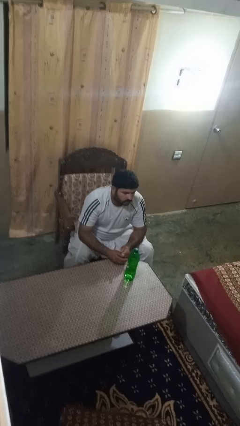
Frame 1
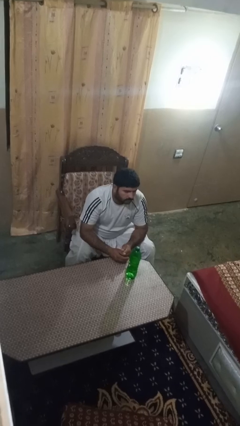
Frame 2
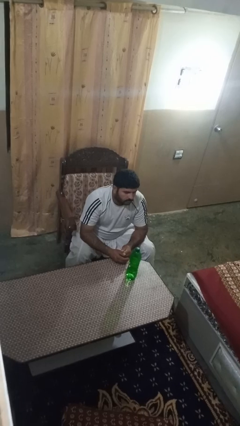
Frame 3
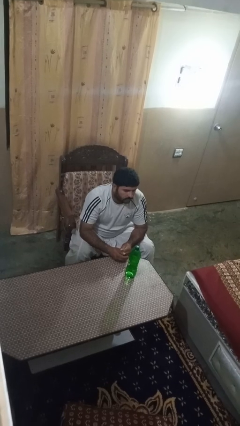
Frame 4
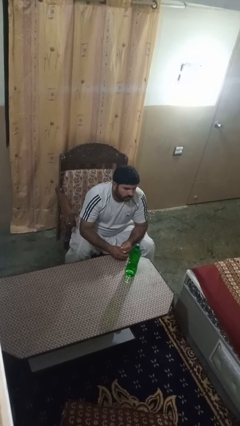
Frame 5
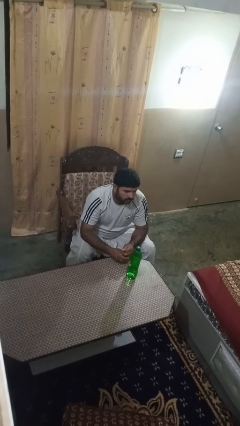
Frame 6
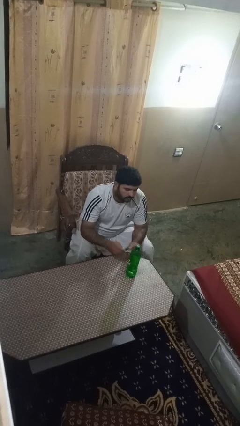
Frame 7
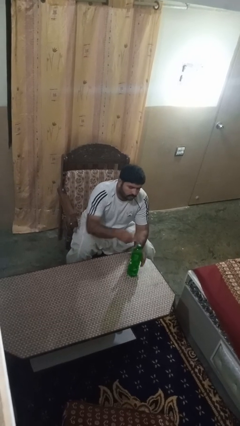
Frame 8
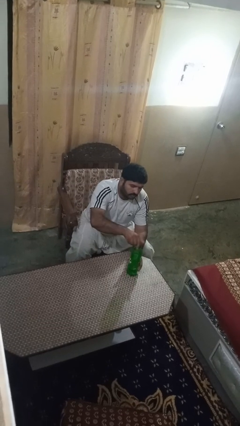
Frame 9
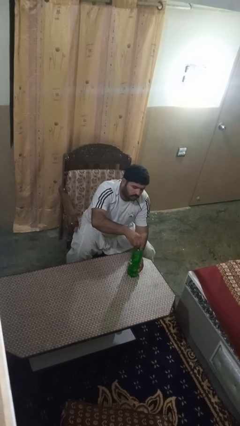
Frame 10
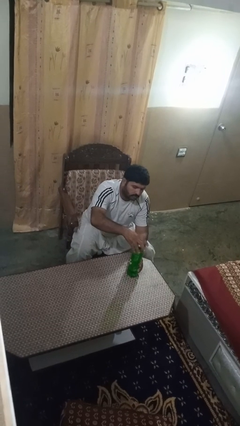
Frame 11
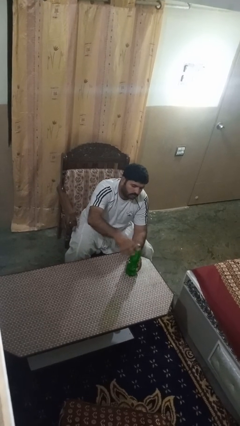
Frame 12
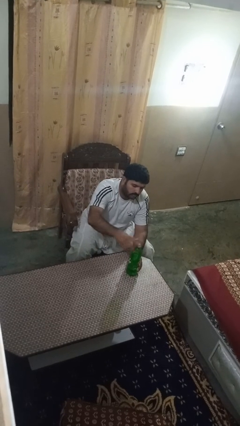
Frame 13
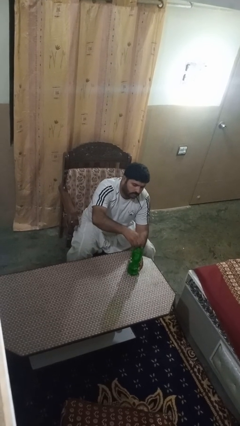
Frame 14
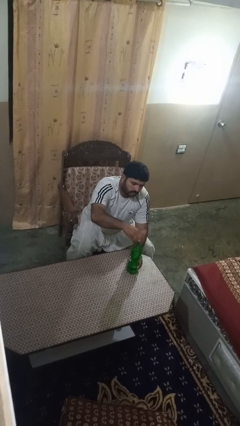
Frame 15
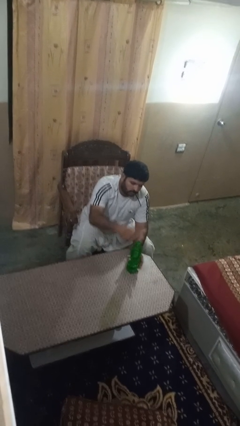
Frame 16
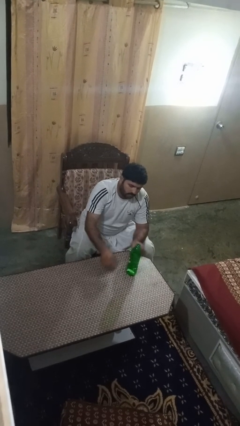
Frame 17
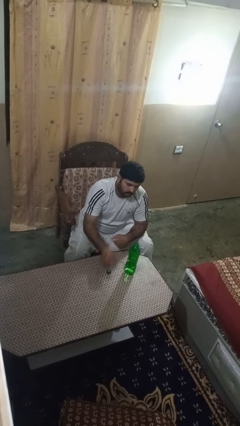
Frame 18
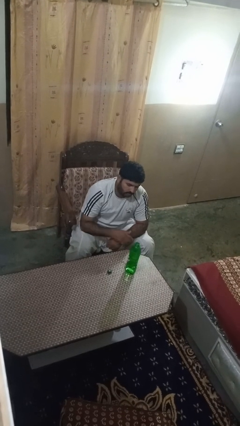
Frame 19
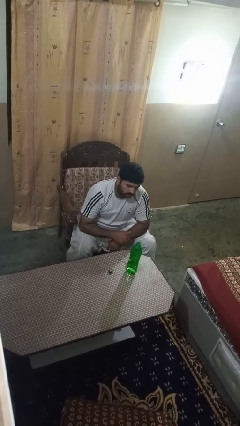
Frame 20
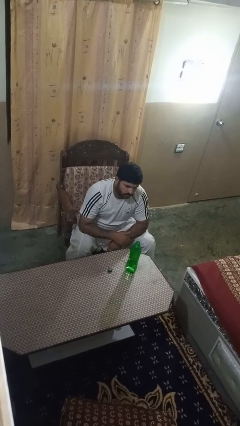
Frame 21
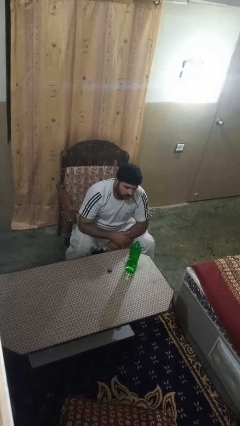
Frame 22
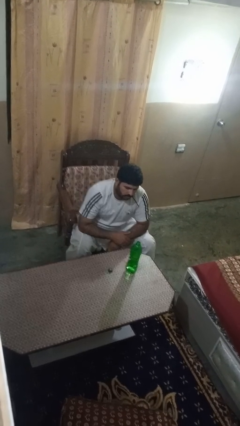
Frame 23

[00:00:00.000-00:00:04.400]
person unscrews lid from bottle

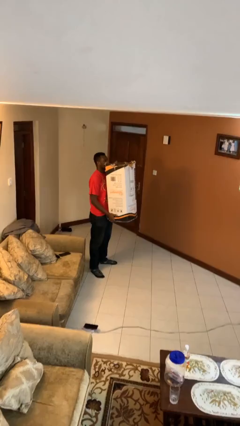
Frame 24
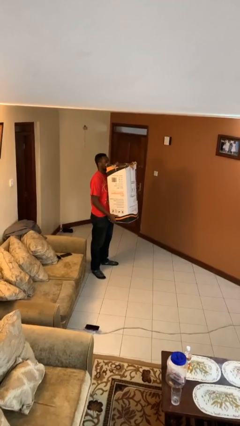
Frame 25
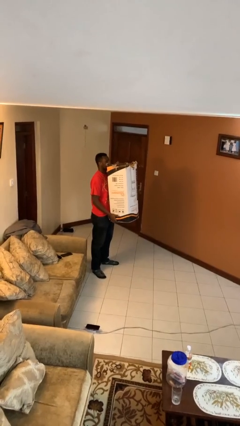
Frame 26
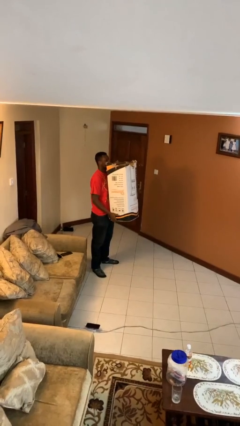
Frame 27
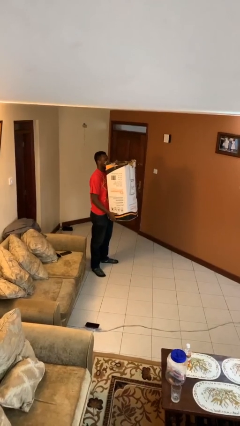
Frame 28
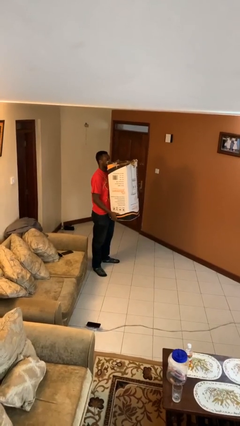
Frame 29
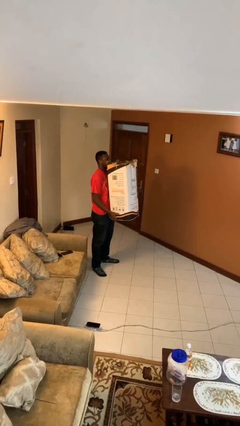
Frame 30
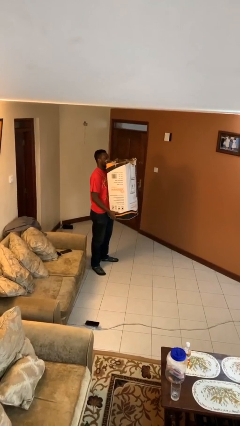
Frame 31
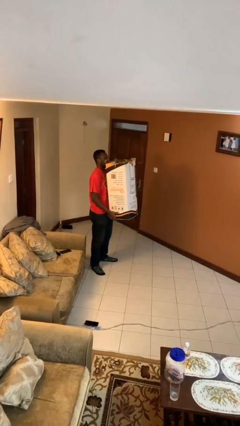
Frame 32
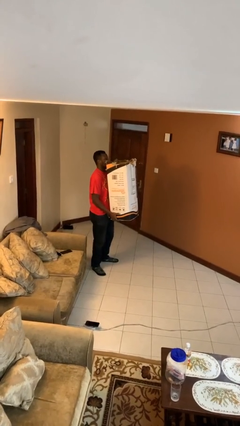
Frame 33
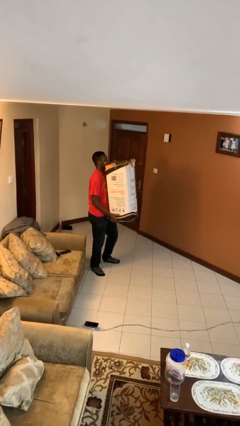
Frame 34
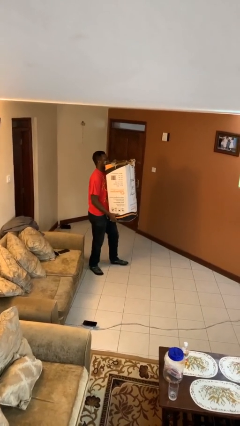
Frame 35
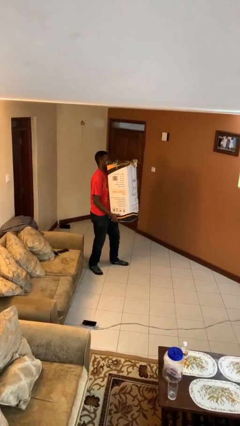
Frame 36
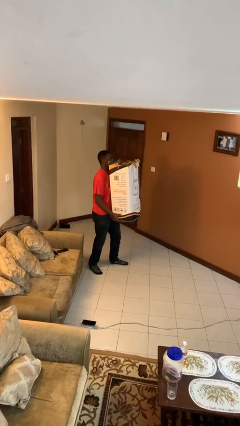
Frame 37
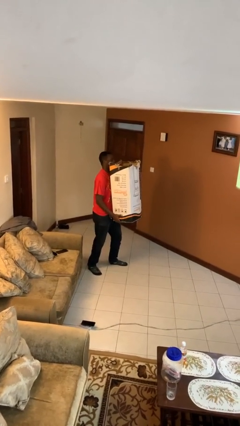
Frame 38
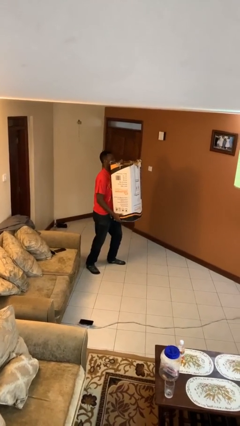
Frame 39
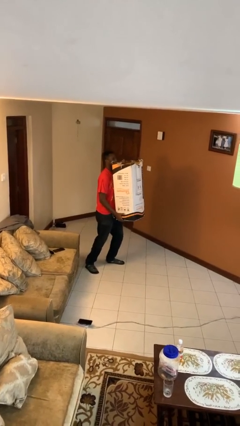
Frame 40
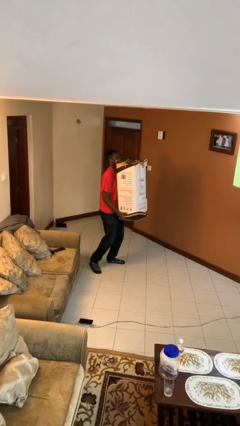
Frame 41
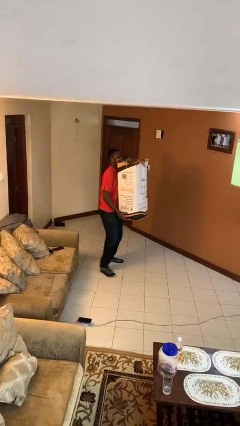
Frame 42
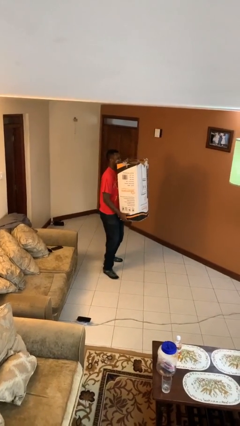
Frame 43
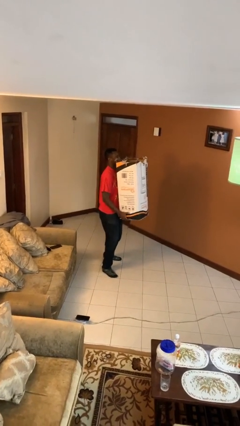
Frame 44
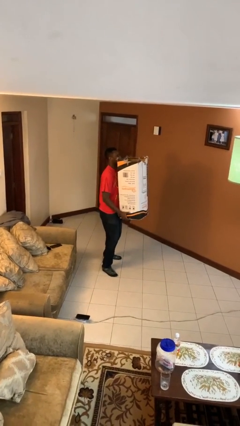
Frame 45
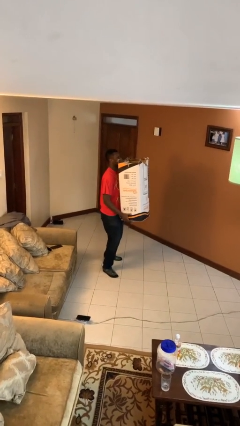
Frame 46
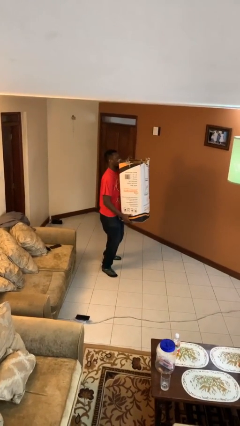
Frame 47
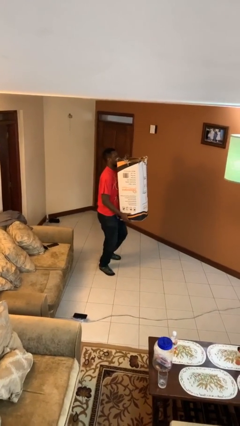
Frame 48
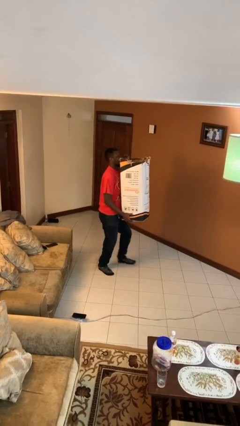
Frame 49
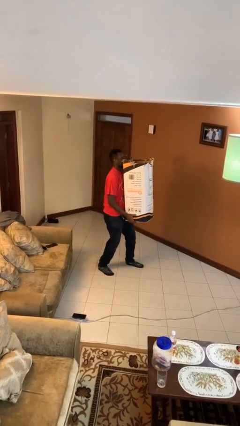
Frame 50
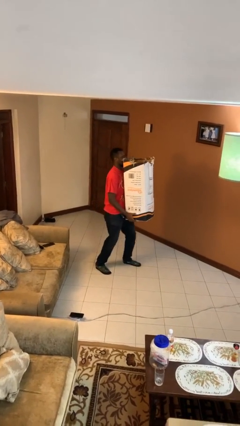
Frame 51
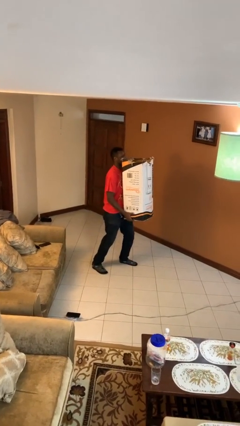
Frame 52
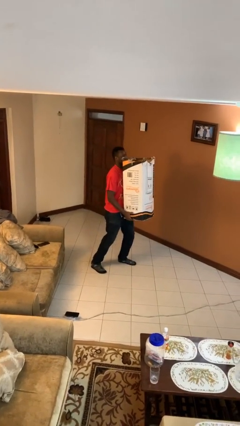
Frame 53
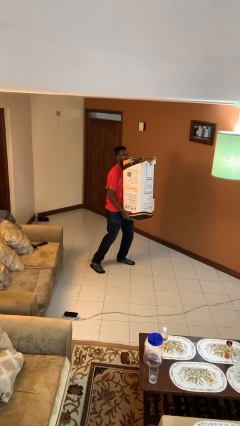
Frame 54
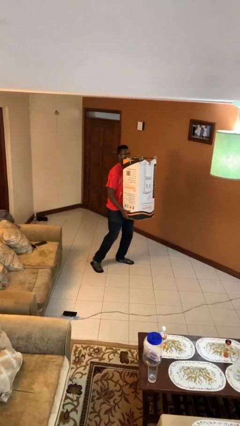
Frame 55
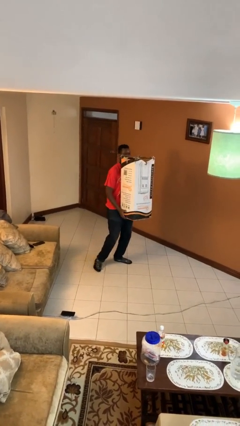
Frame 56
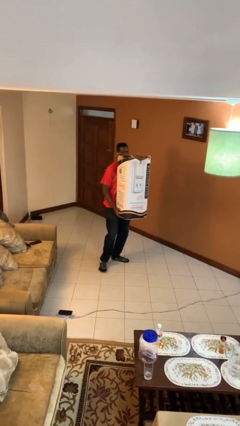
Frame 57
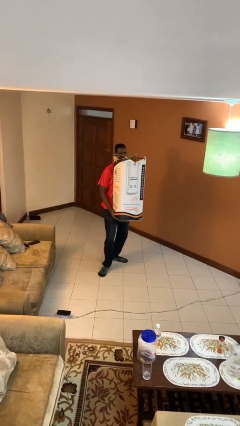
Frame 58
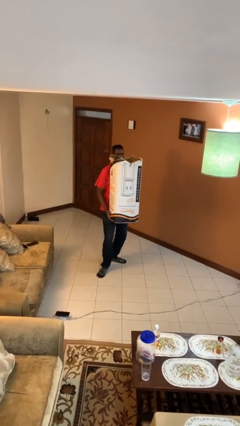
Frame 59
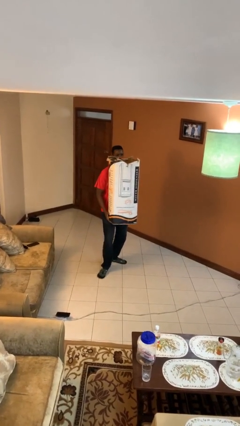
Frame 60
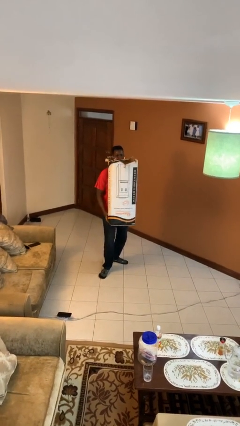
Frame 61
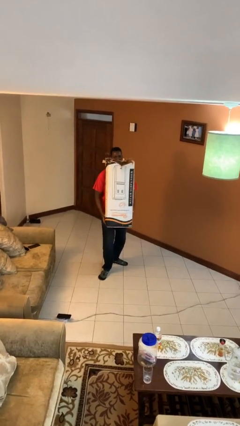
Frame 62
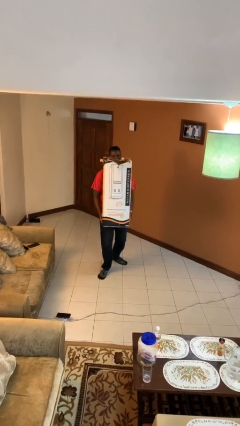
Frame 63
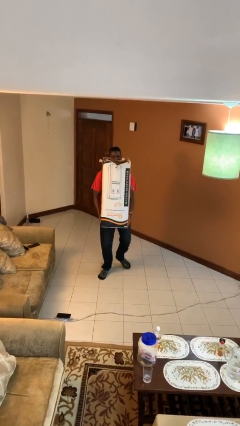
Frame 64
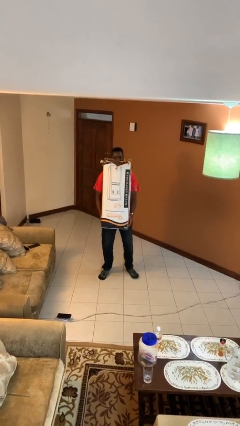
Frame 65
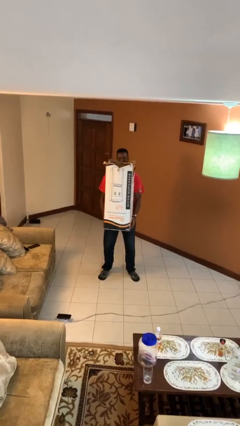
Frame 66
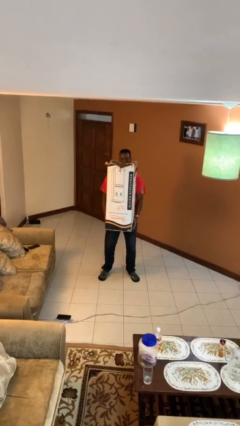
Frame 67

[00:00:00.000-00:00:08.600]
person carries heavy object

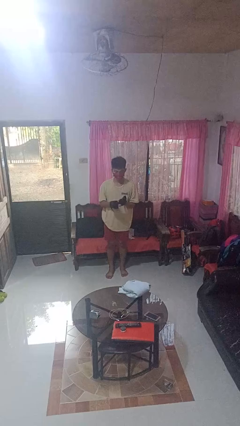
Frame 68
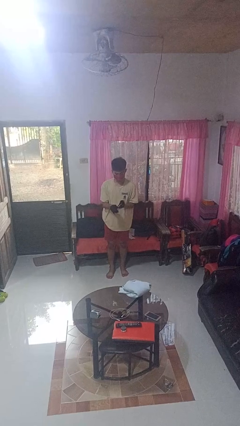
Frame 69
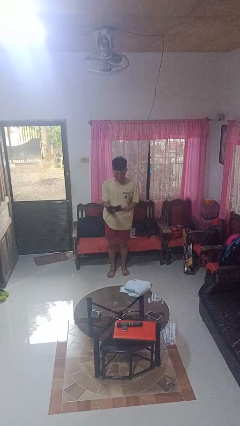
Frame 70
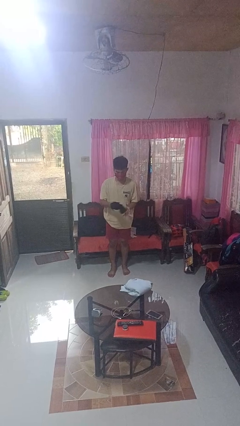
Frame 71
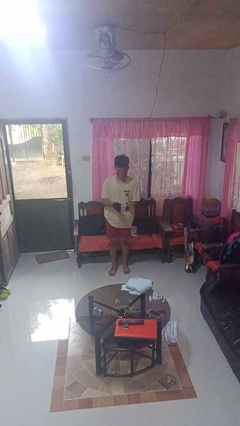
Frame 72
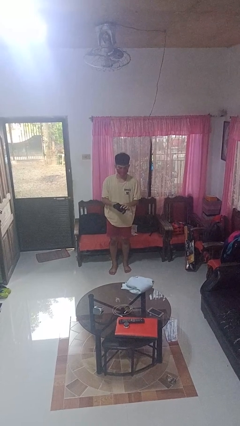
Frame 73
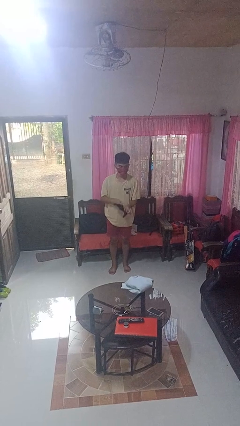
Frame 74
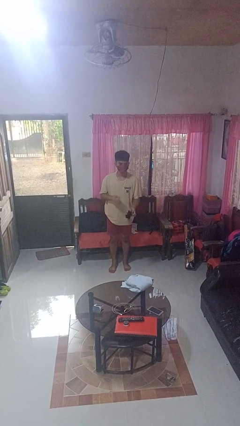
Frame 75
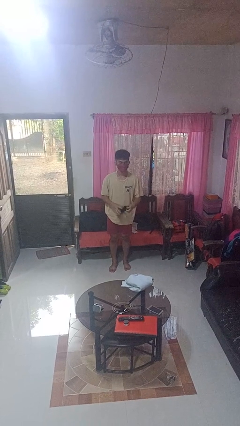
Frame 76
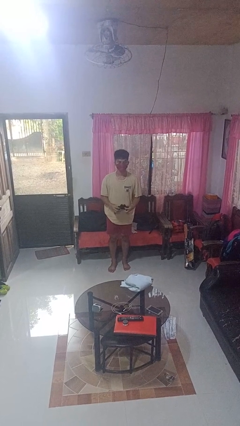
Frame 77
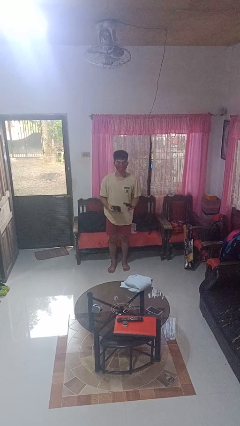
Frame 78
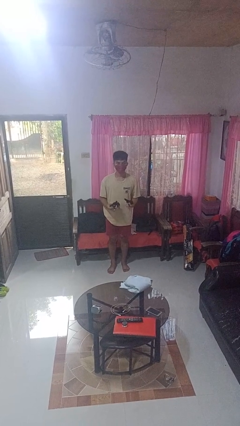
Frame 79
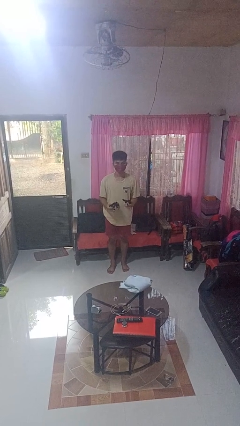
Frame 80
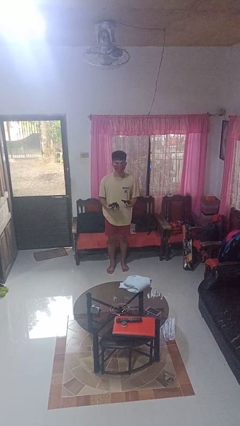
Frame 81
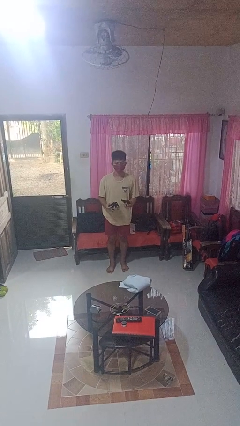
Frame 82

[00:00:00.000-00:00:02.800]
person takes off gloves

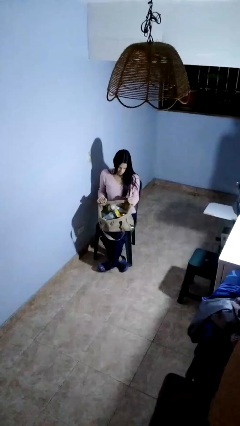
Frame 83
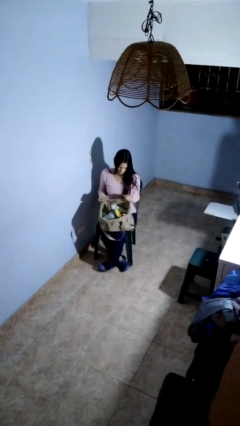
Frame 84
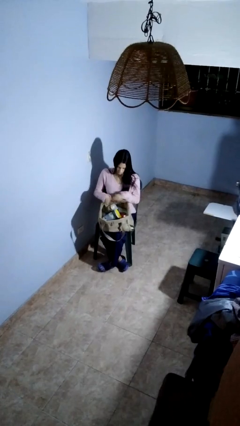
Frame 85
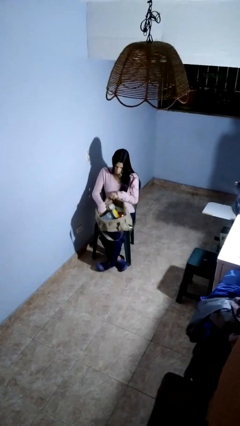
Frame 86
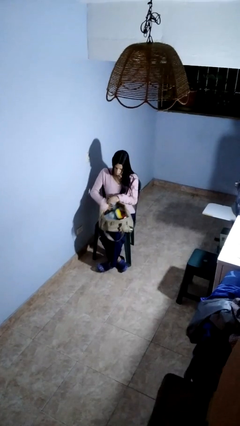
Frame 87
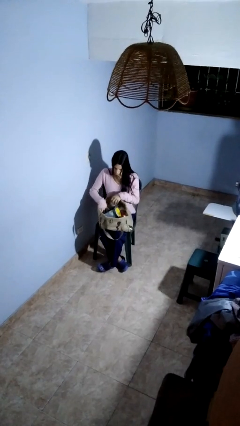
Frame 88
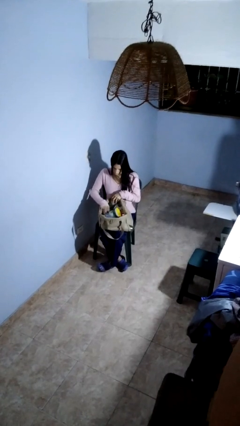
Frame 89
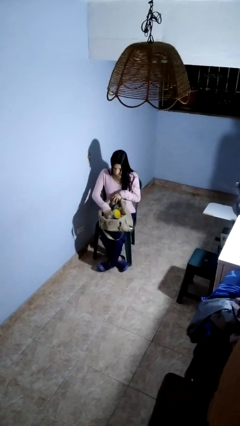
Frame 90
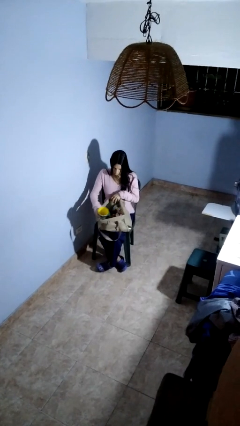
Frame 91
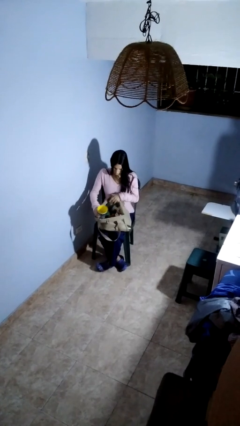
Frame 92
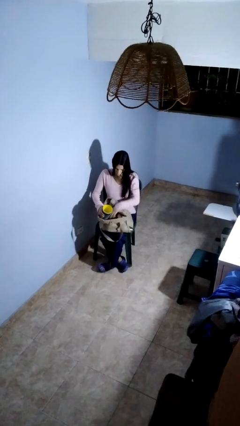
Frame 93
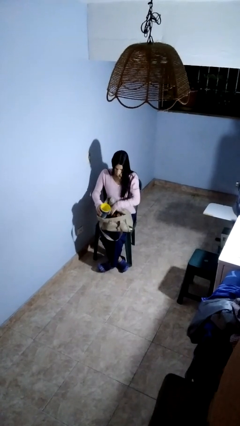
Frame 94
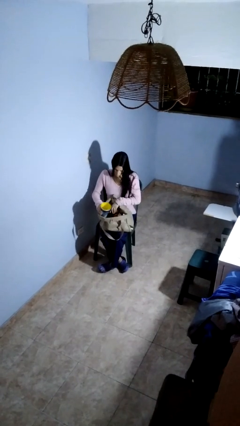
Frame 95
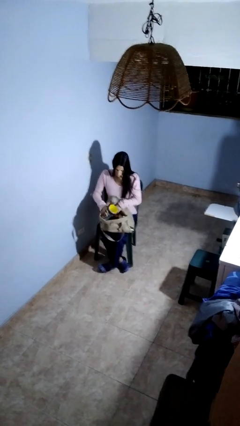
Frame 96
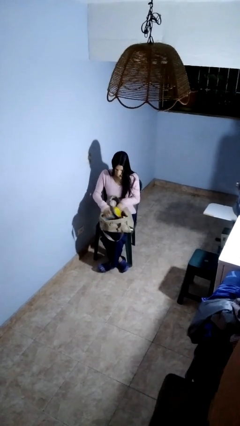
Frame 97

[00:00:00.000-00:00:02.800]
person searches in bag
